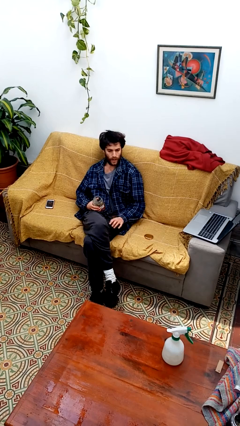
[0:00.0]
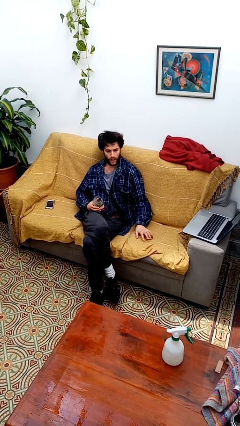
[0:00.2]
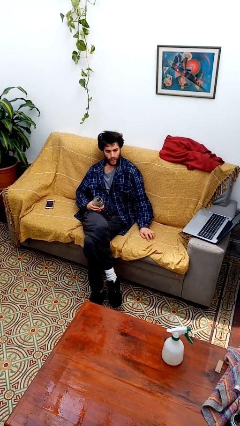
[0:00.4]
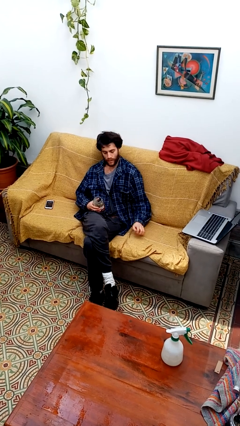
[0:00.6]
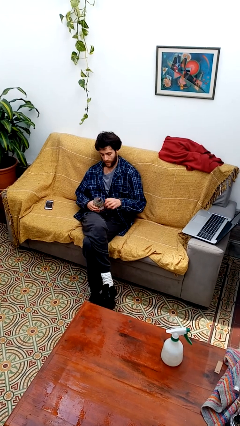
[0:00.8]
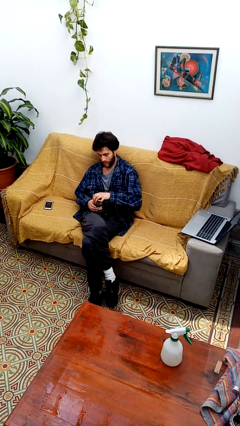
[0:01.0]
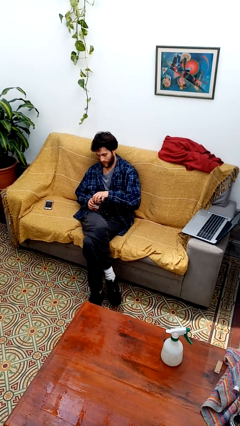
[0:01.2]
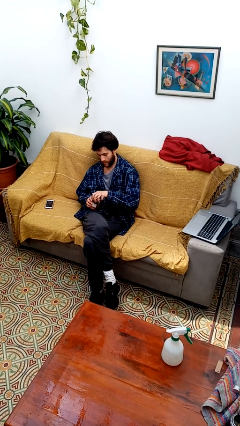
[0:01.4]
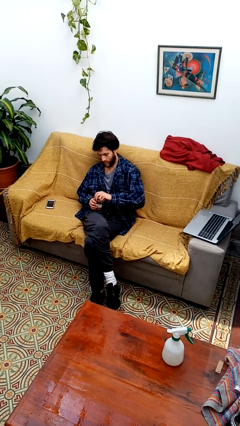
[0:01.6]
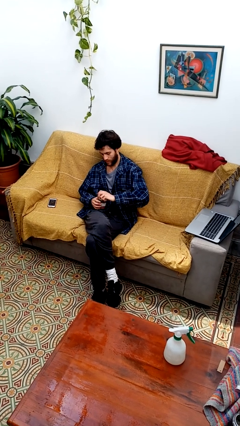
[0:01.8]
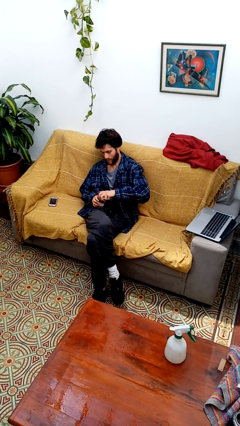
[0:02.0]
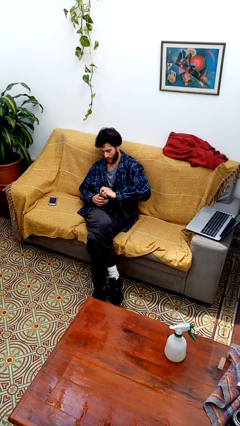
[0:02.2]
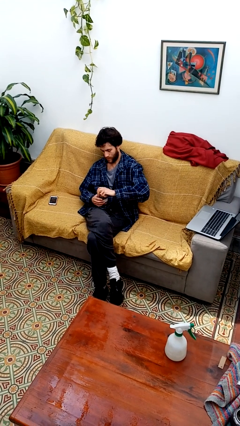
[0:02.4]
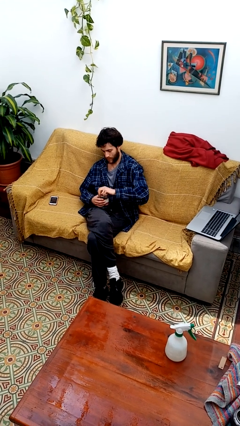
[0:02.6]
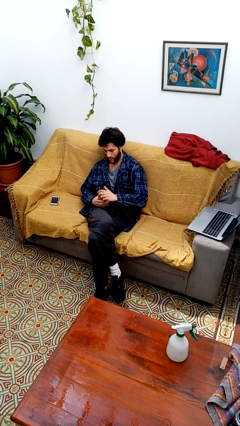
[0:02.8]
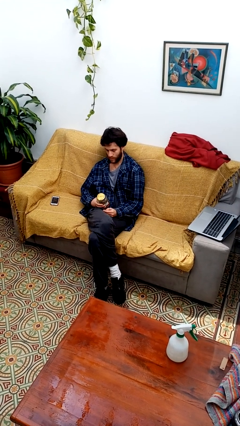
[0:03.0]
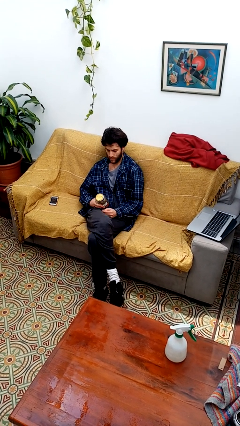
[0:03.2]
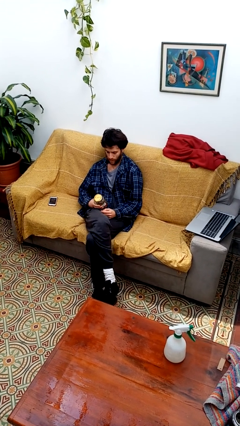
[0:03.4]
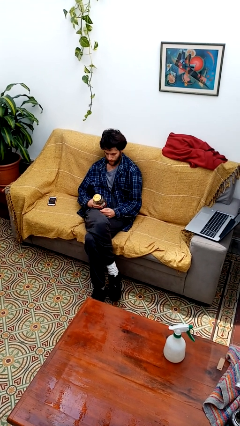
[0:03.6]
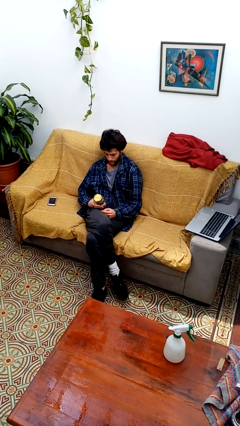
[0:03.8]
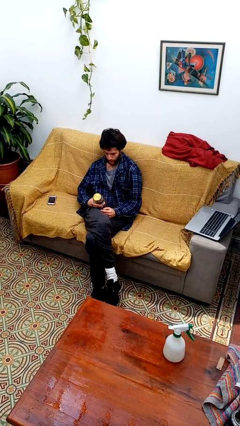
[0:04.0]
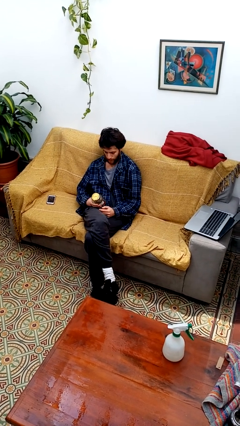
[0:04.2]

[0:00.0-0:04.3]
person closes jar

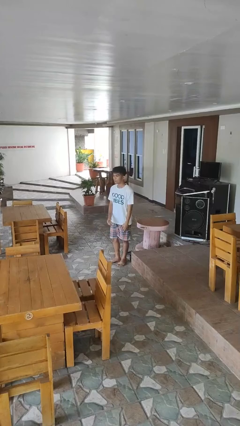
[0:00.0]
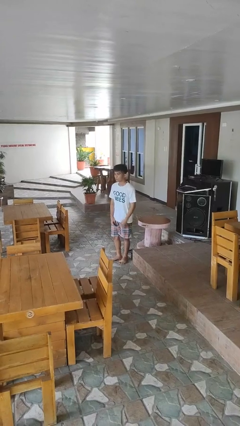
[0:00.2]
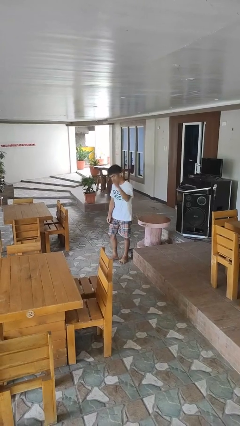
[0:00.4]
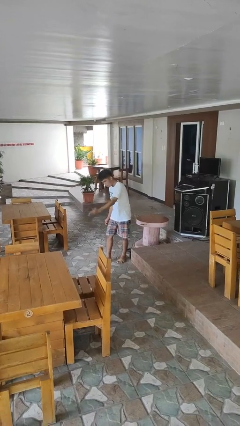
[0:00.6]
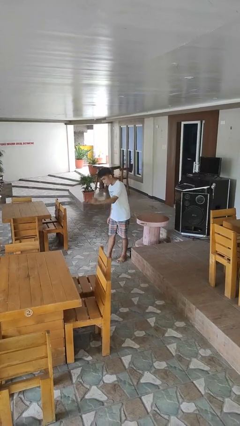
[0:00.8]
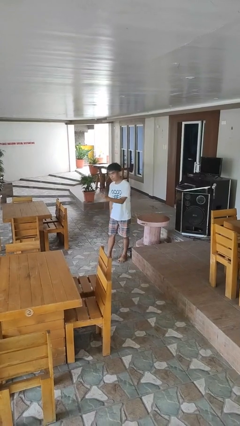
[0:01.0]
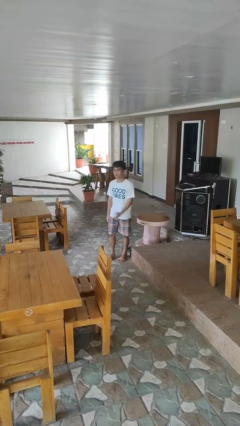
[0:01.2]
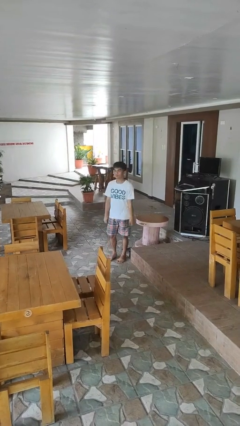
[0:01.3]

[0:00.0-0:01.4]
person karate chop

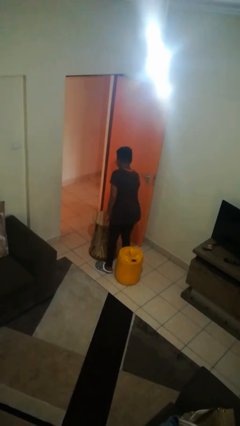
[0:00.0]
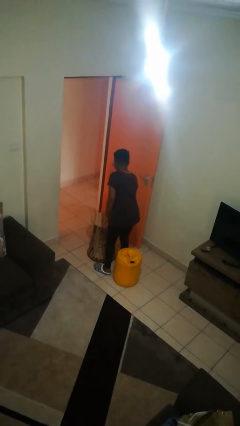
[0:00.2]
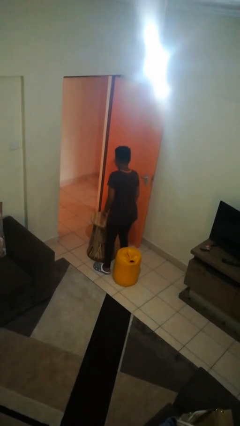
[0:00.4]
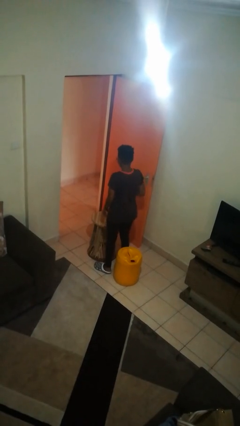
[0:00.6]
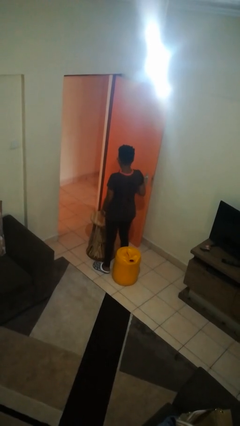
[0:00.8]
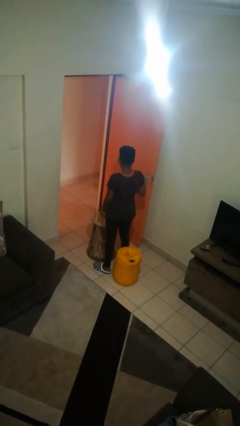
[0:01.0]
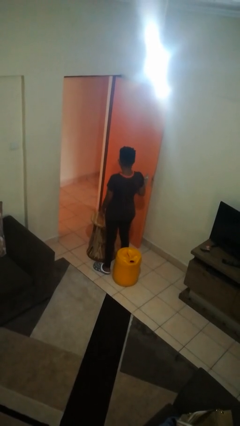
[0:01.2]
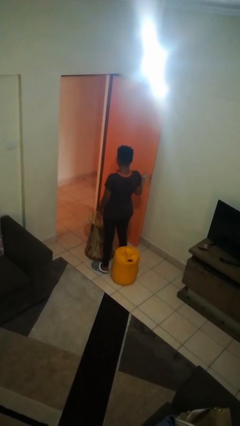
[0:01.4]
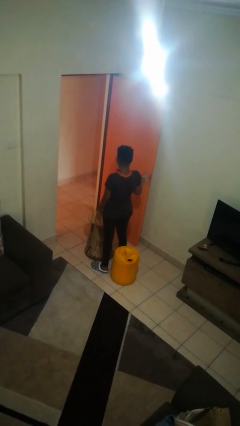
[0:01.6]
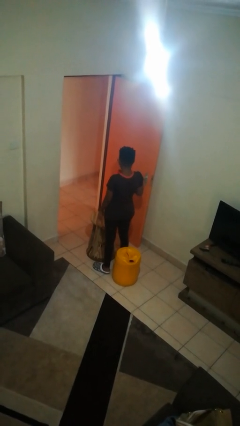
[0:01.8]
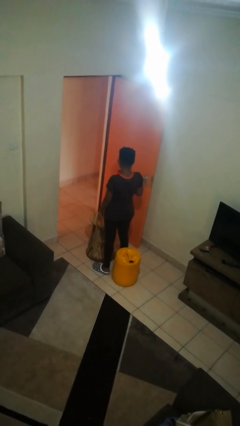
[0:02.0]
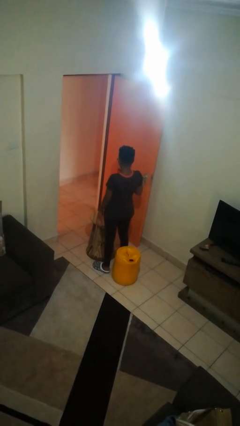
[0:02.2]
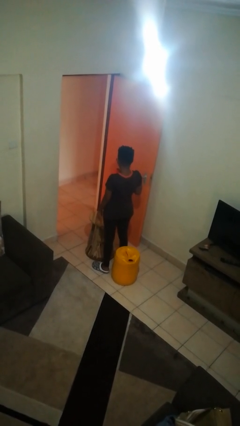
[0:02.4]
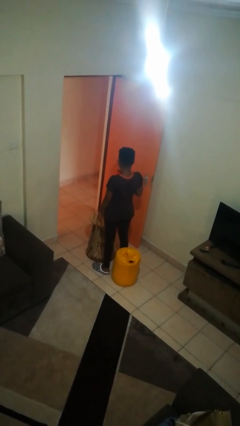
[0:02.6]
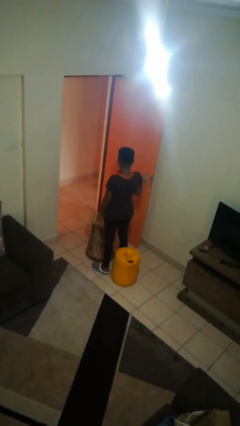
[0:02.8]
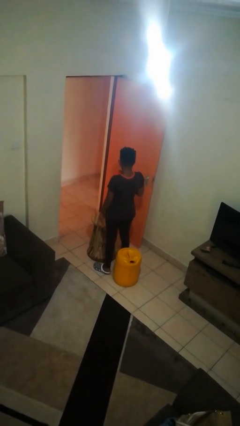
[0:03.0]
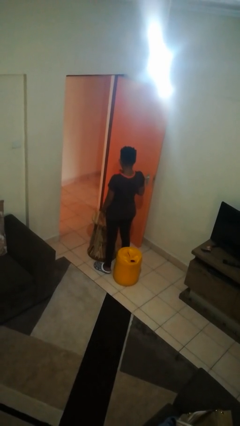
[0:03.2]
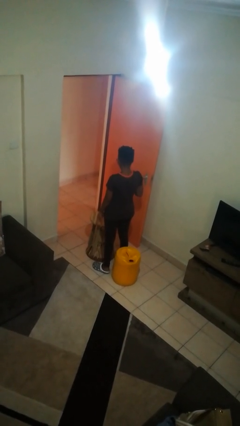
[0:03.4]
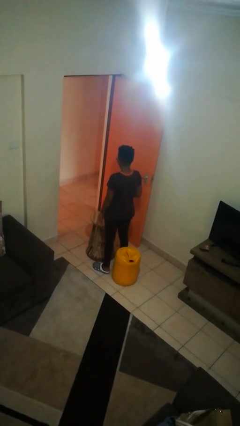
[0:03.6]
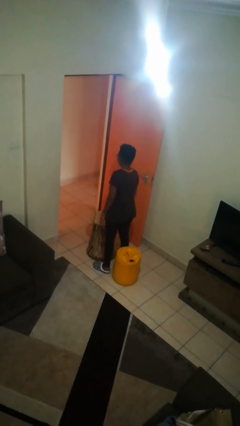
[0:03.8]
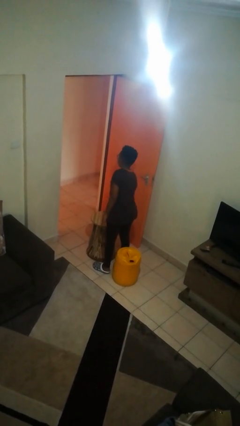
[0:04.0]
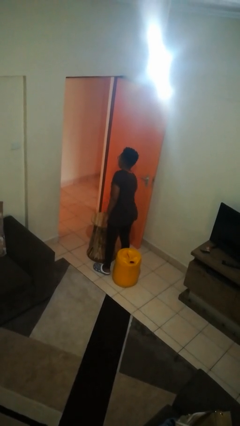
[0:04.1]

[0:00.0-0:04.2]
person drinks from straw

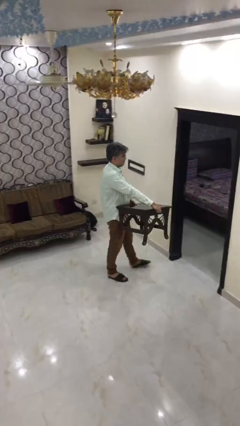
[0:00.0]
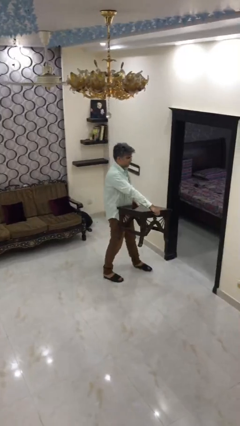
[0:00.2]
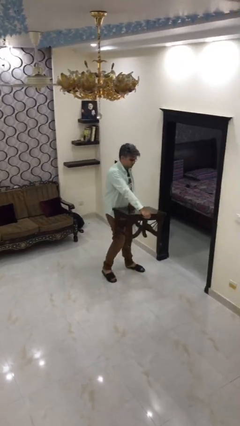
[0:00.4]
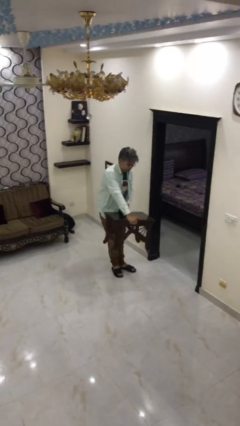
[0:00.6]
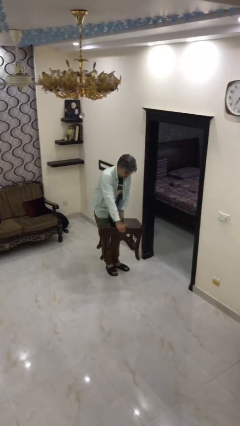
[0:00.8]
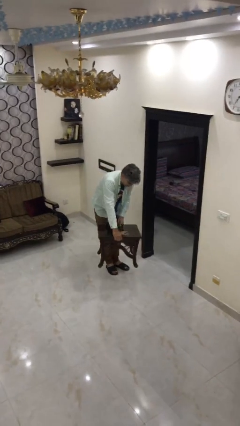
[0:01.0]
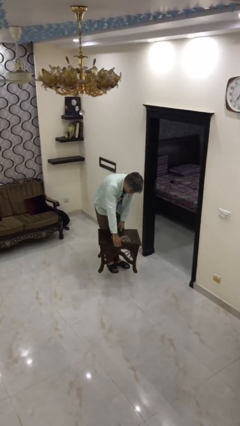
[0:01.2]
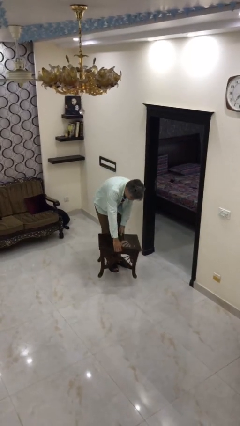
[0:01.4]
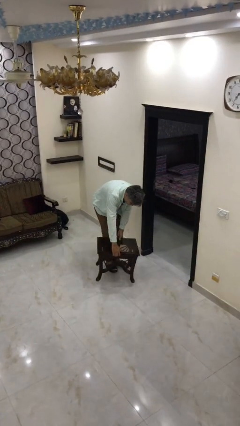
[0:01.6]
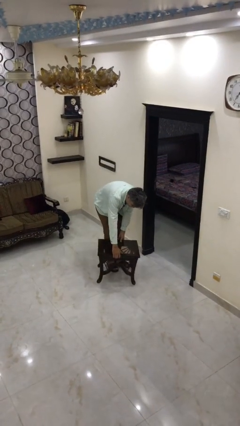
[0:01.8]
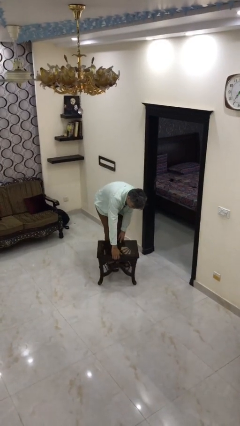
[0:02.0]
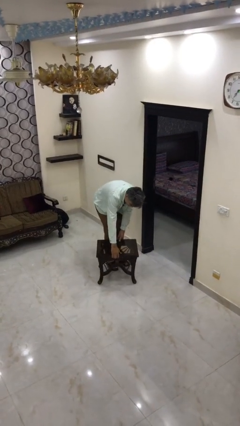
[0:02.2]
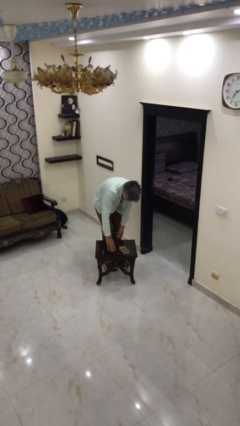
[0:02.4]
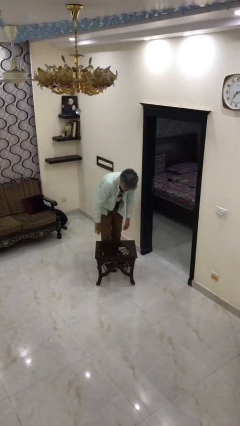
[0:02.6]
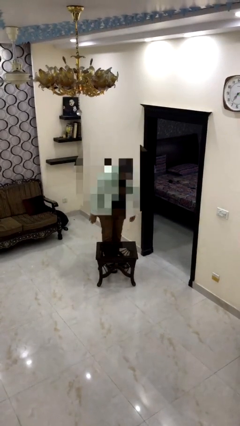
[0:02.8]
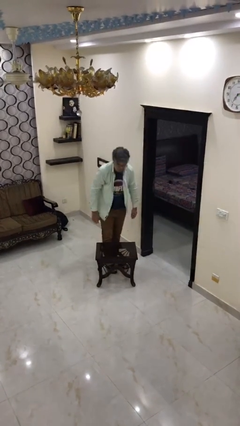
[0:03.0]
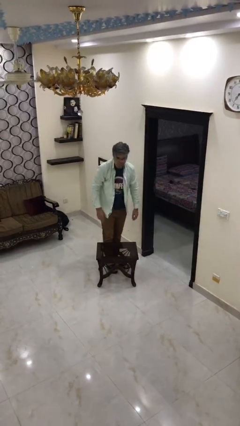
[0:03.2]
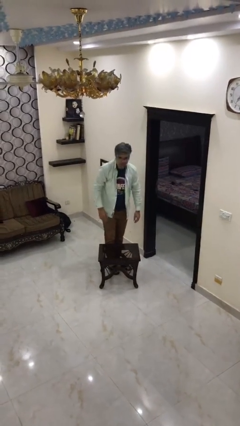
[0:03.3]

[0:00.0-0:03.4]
person puts down object on floor

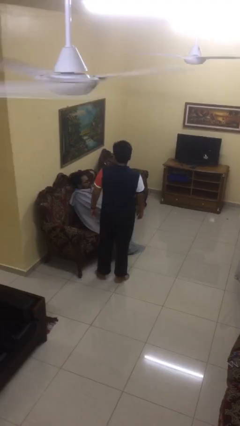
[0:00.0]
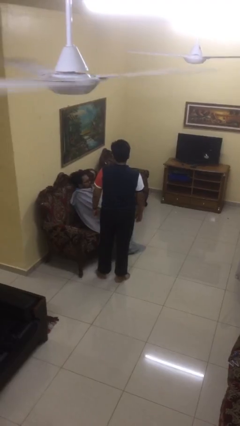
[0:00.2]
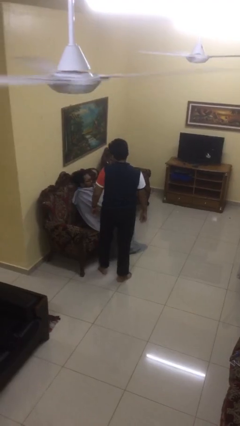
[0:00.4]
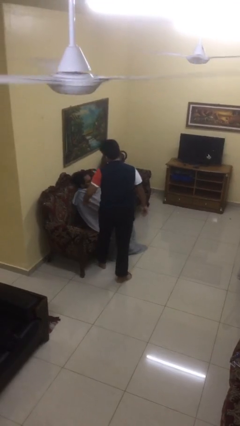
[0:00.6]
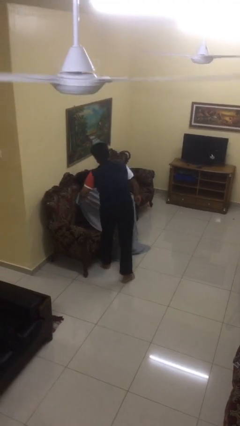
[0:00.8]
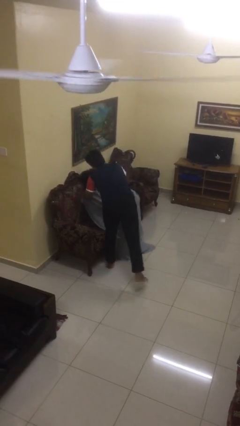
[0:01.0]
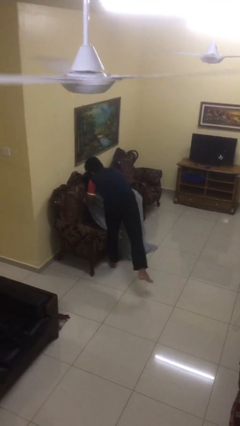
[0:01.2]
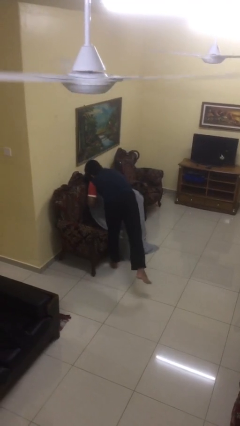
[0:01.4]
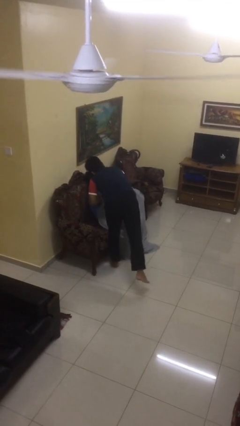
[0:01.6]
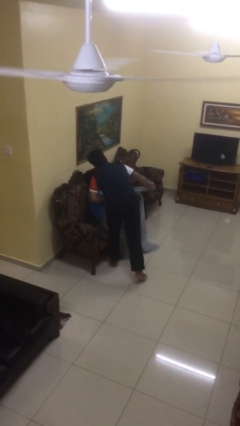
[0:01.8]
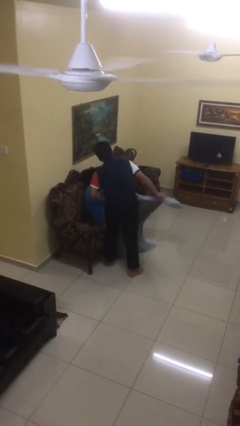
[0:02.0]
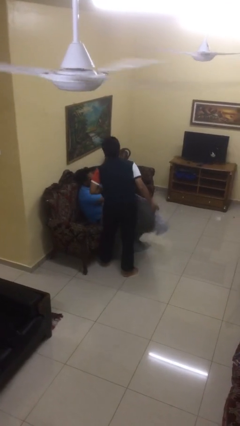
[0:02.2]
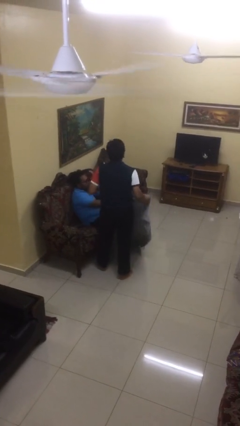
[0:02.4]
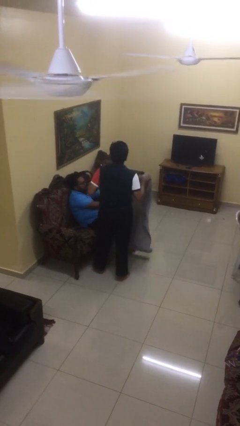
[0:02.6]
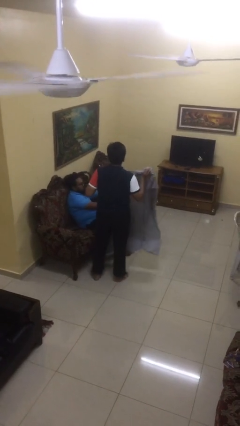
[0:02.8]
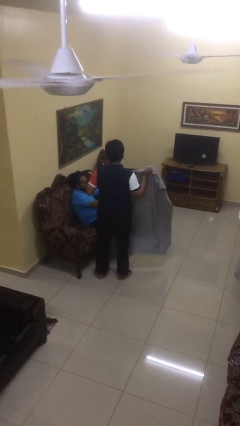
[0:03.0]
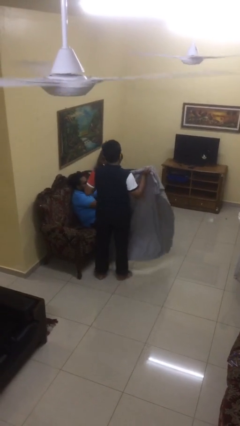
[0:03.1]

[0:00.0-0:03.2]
person uncovers friend with blanket

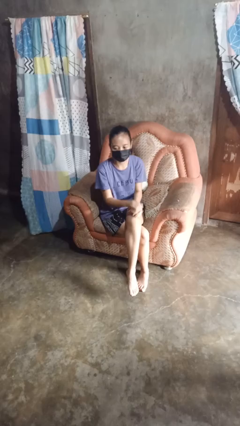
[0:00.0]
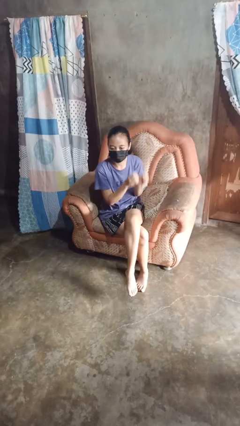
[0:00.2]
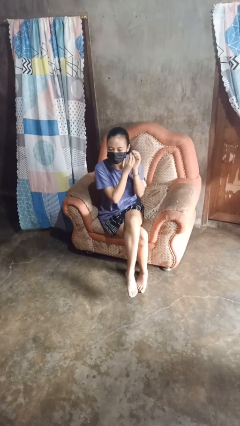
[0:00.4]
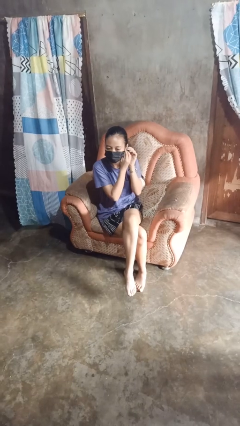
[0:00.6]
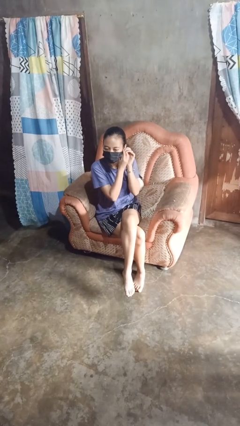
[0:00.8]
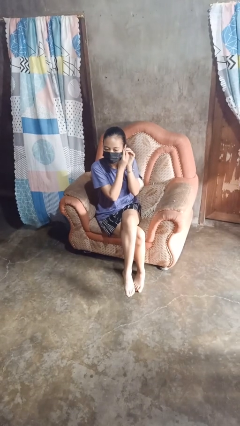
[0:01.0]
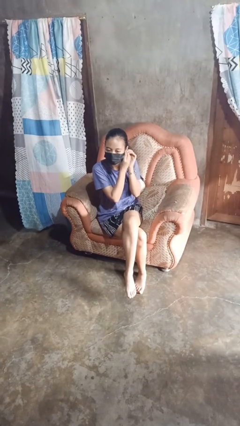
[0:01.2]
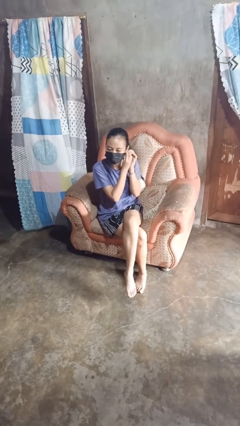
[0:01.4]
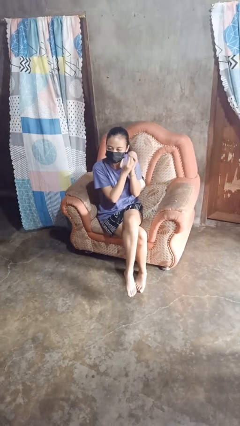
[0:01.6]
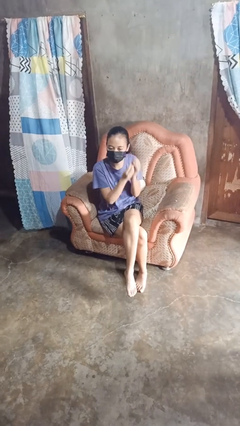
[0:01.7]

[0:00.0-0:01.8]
person takes off earrings
